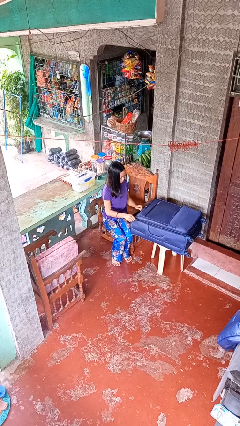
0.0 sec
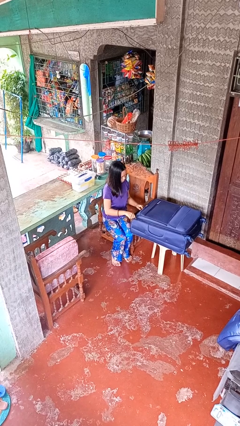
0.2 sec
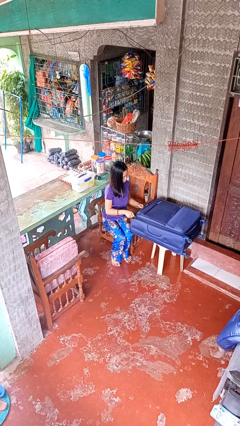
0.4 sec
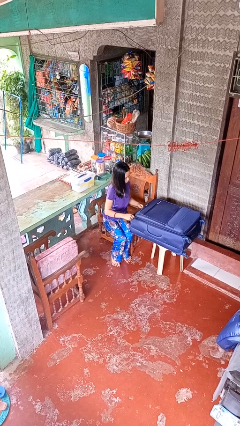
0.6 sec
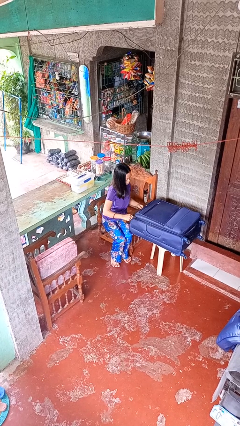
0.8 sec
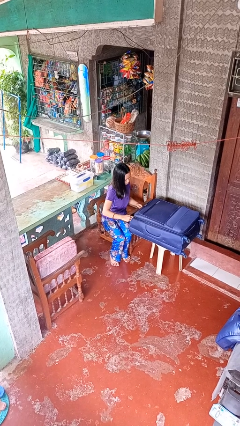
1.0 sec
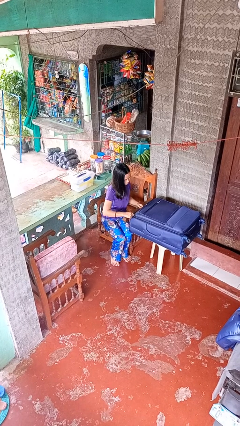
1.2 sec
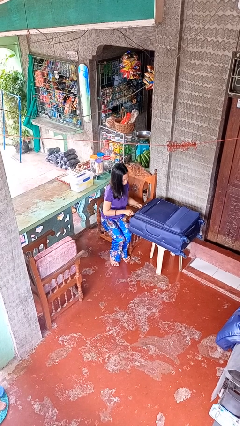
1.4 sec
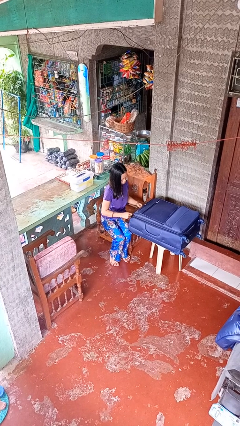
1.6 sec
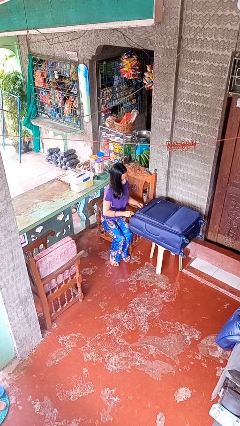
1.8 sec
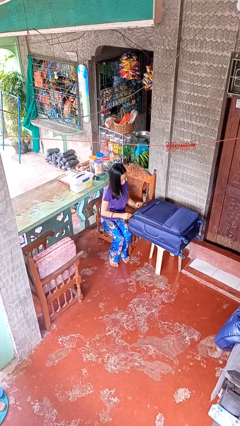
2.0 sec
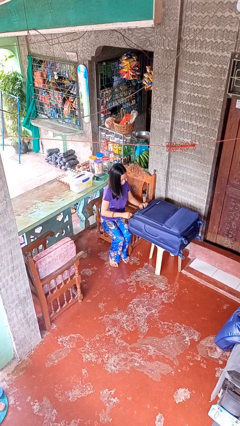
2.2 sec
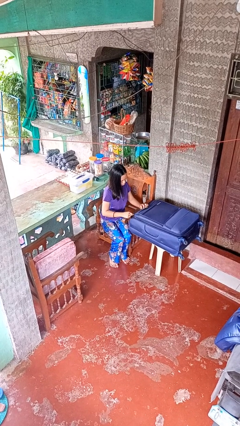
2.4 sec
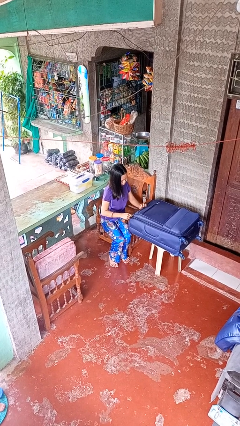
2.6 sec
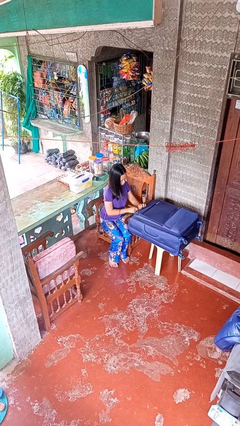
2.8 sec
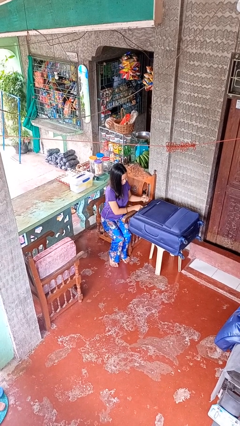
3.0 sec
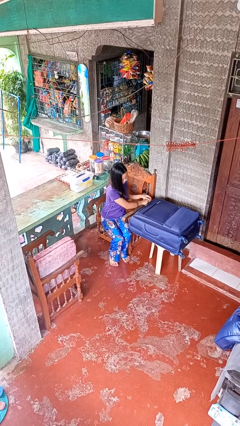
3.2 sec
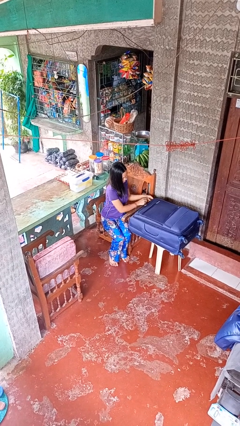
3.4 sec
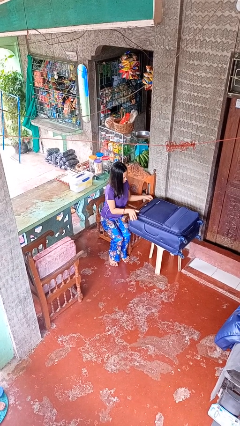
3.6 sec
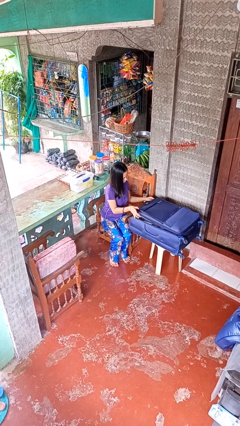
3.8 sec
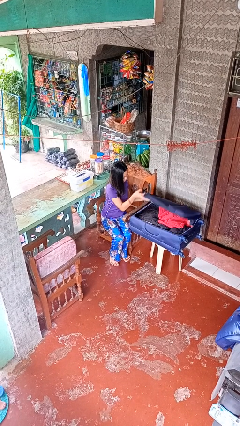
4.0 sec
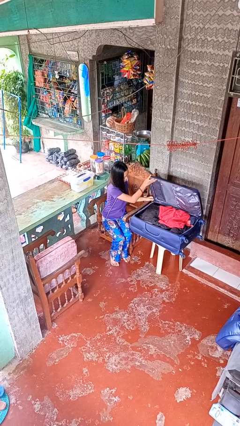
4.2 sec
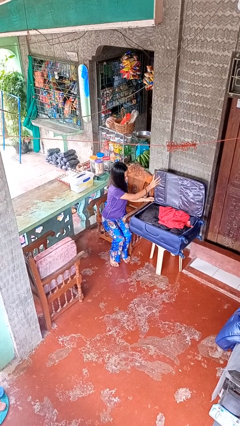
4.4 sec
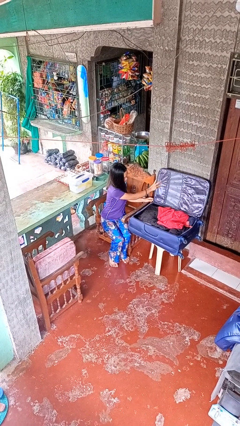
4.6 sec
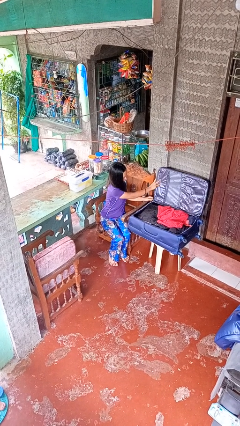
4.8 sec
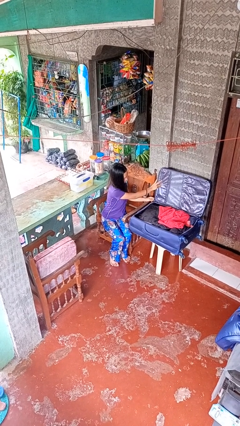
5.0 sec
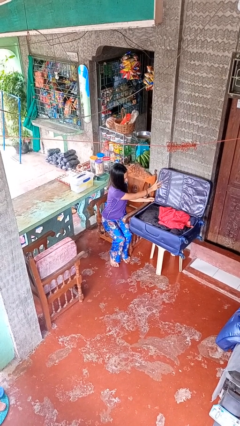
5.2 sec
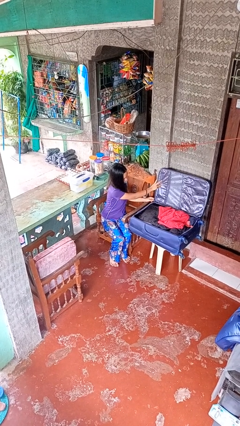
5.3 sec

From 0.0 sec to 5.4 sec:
person opens suitcase

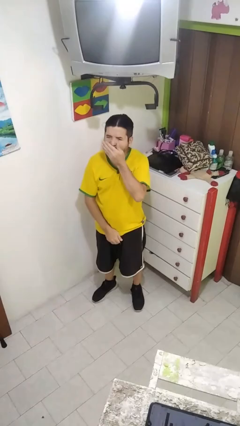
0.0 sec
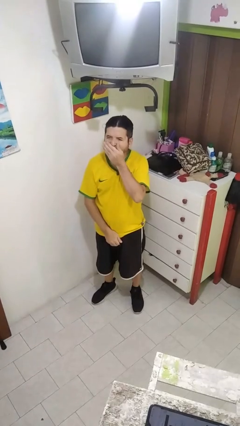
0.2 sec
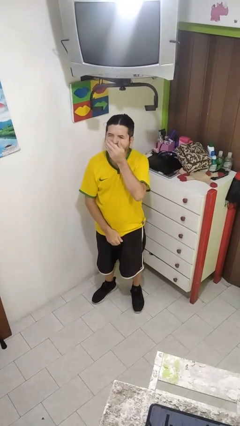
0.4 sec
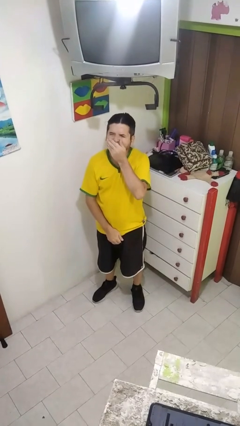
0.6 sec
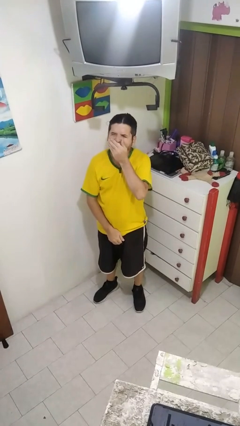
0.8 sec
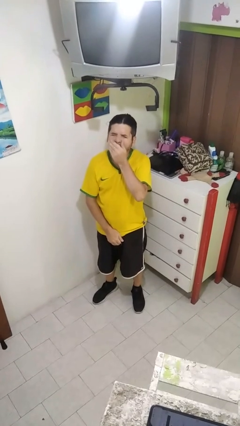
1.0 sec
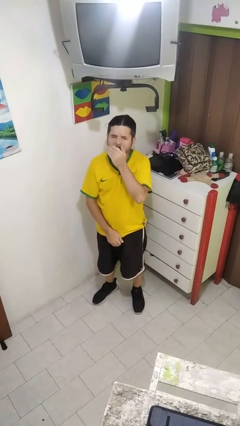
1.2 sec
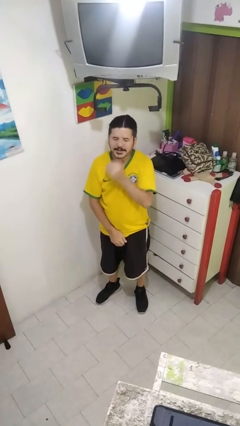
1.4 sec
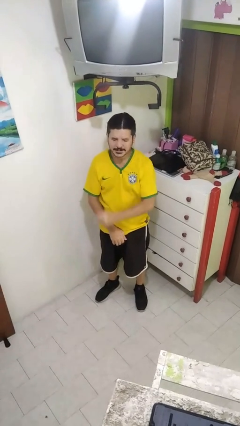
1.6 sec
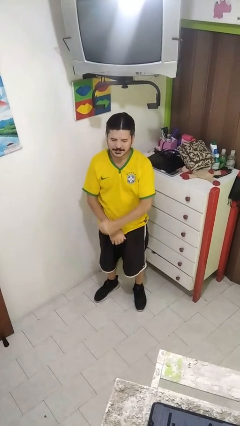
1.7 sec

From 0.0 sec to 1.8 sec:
person yawns

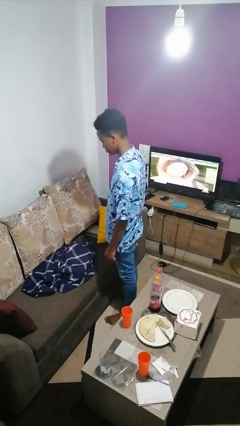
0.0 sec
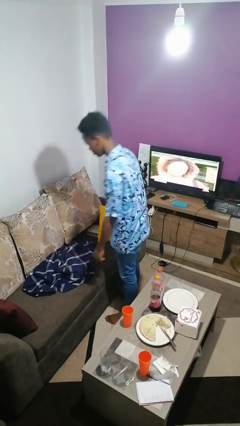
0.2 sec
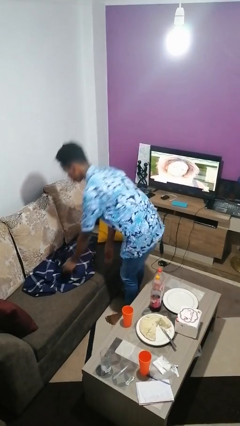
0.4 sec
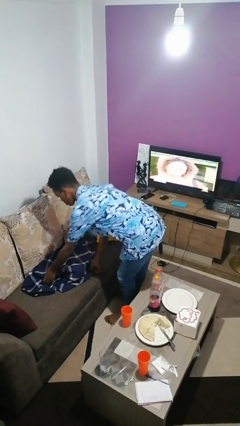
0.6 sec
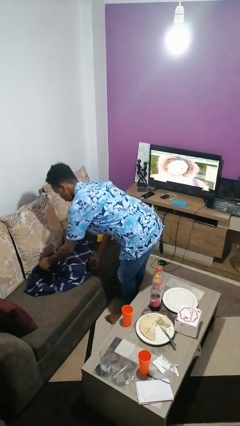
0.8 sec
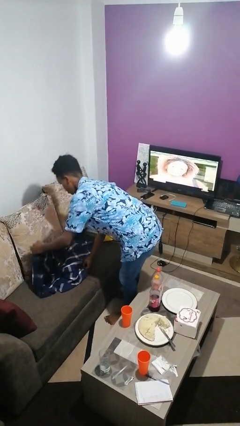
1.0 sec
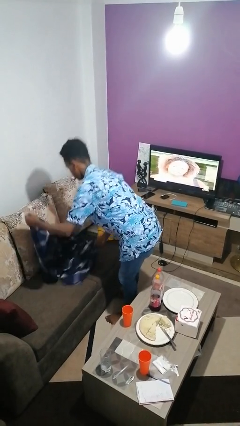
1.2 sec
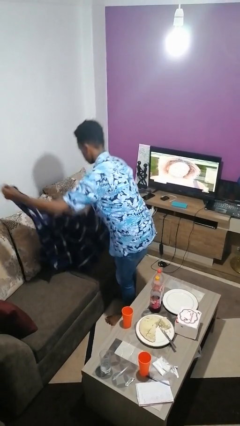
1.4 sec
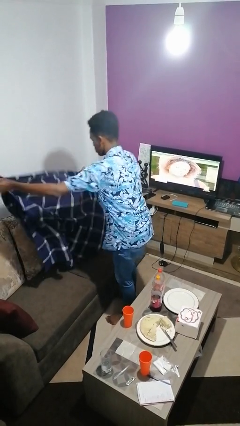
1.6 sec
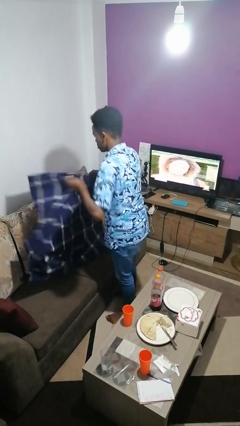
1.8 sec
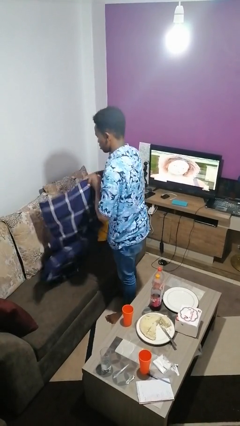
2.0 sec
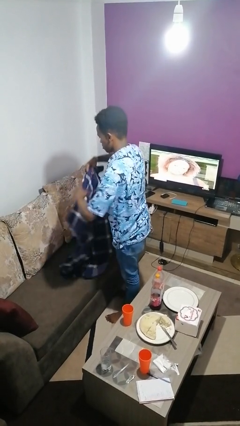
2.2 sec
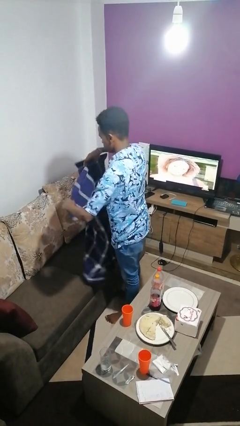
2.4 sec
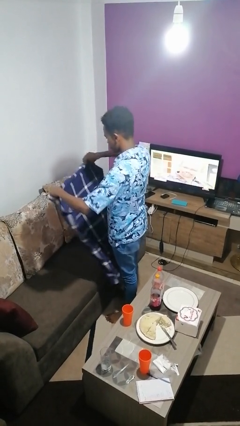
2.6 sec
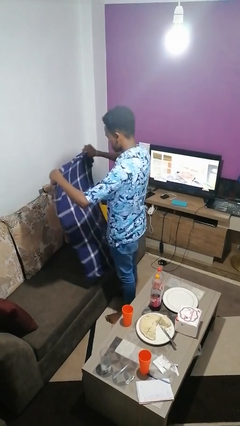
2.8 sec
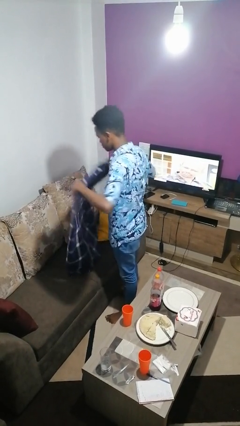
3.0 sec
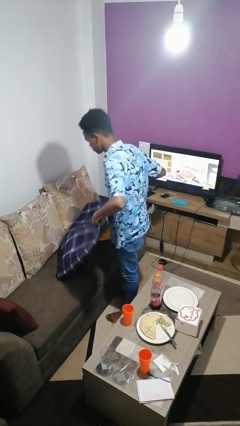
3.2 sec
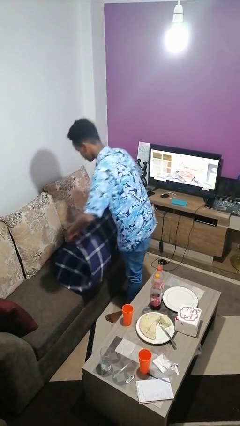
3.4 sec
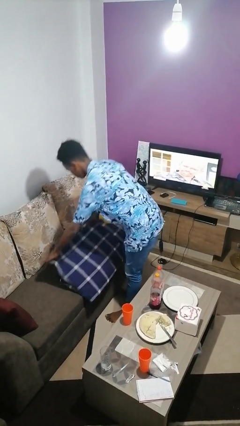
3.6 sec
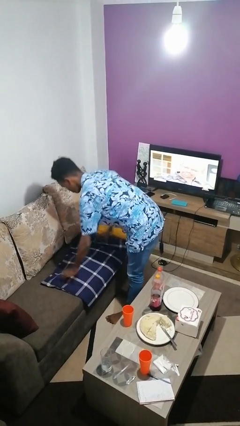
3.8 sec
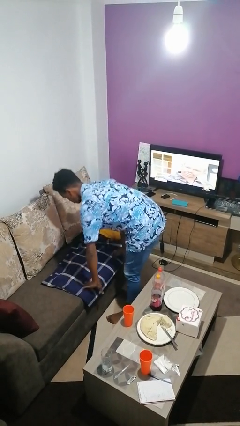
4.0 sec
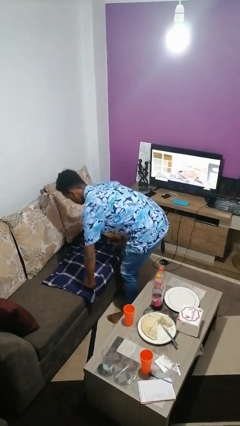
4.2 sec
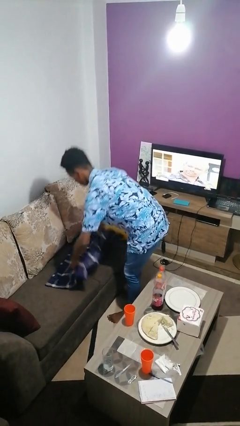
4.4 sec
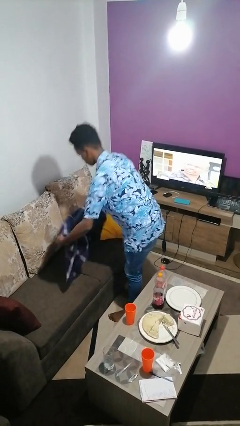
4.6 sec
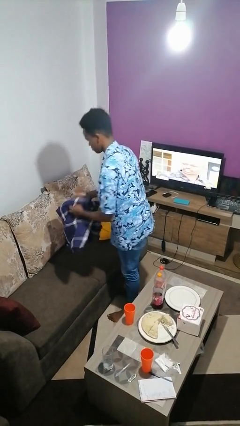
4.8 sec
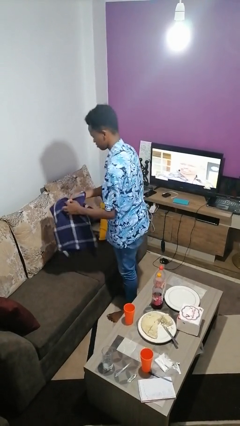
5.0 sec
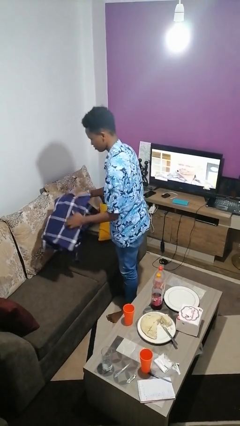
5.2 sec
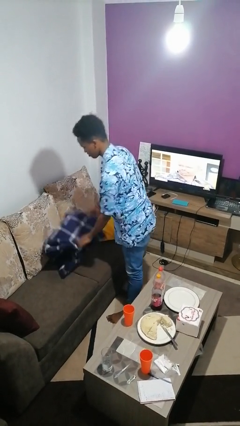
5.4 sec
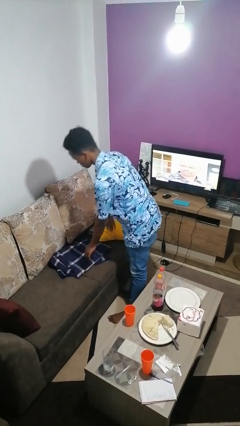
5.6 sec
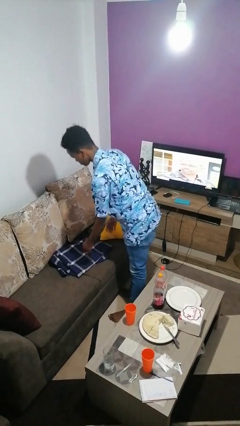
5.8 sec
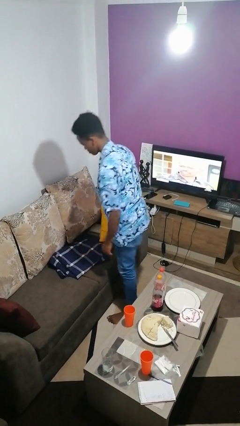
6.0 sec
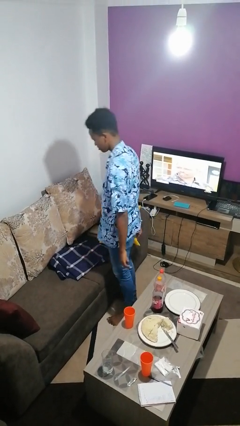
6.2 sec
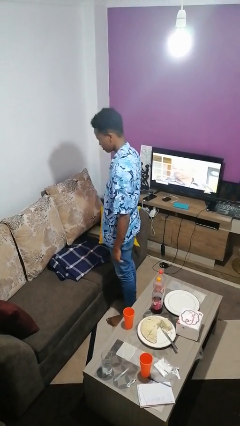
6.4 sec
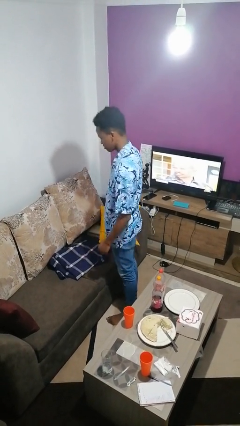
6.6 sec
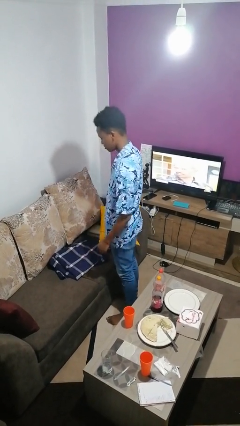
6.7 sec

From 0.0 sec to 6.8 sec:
person folds blanket

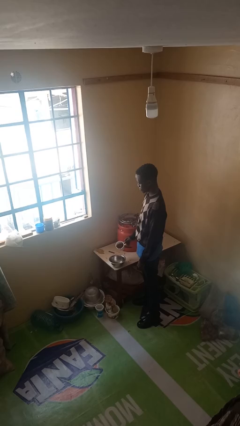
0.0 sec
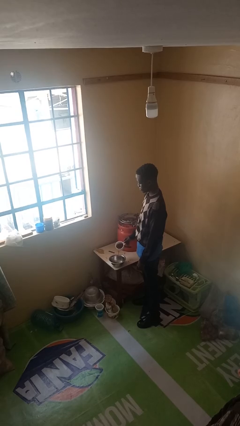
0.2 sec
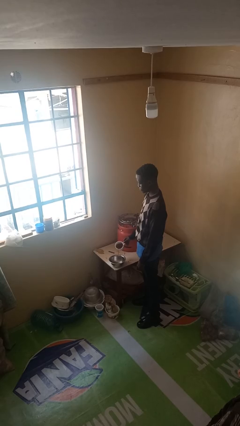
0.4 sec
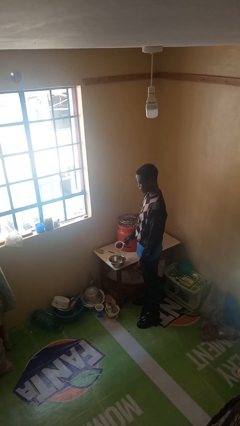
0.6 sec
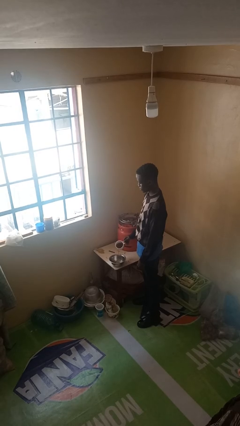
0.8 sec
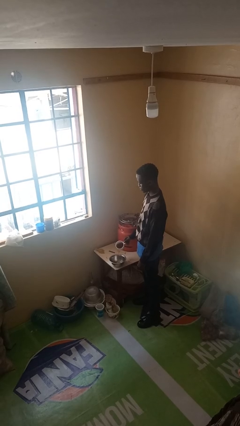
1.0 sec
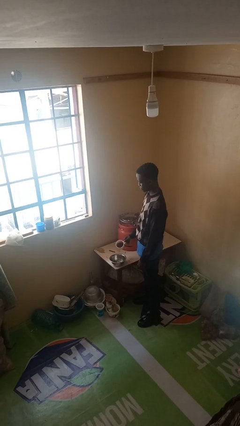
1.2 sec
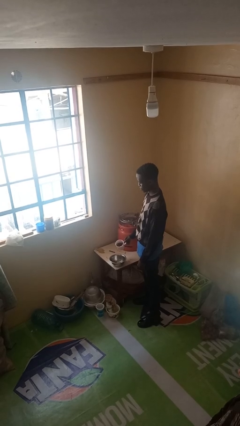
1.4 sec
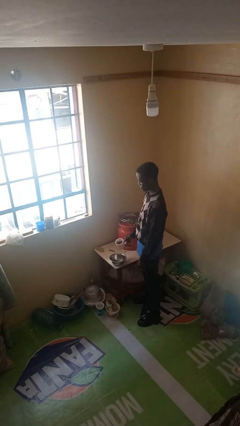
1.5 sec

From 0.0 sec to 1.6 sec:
person pours into bowl

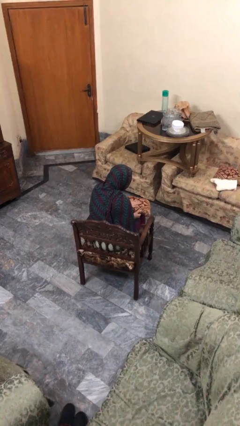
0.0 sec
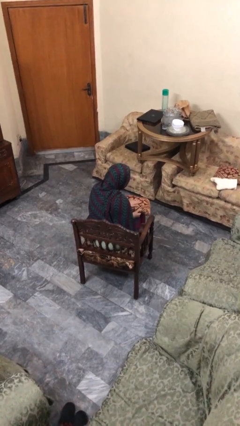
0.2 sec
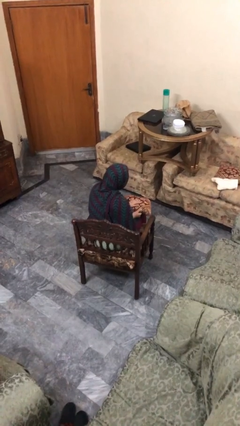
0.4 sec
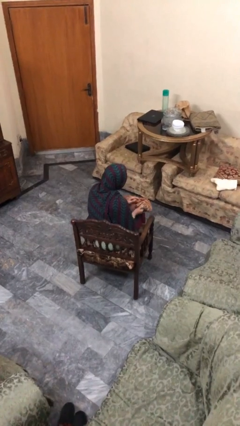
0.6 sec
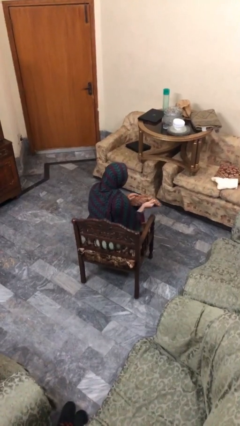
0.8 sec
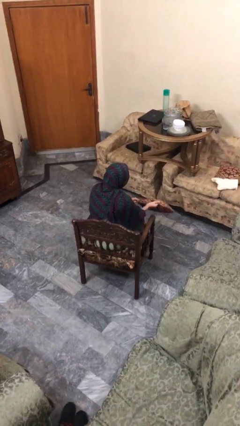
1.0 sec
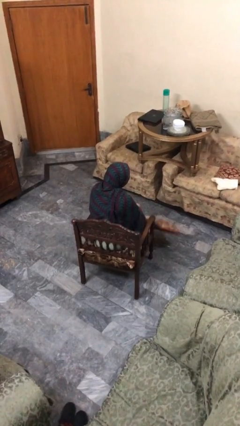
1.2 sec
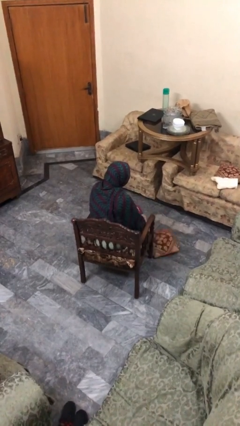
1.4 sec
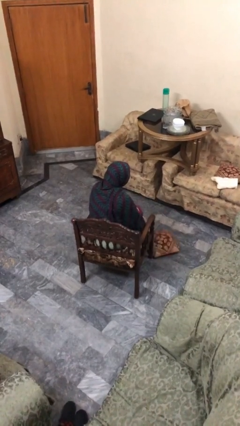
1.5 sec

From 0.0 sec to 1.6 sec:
person drops object

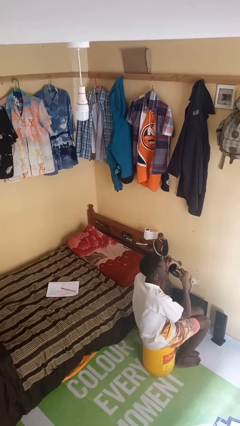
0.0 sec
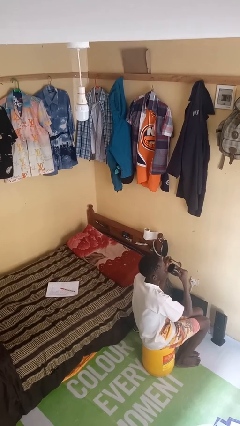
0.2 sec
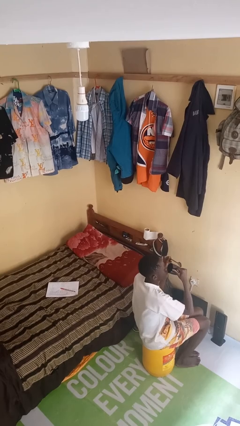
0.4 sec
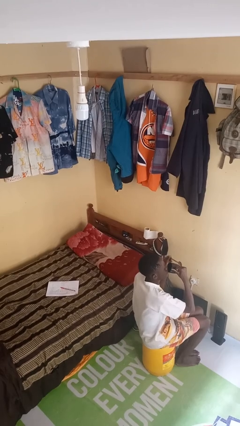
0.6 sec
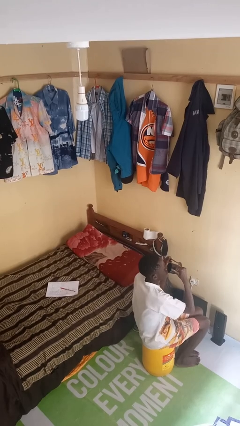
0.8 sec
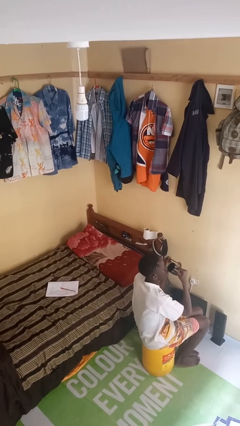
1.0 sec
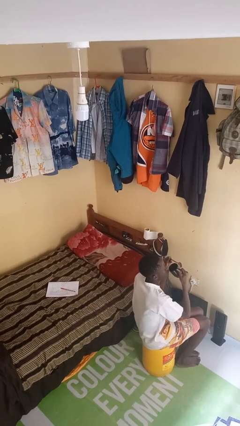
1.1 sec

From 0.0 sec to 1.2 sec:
person drinks from mug
